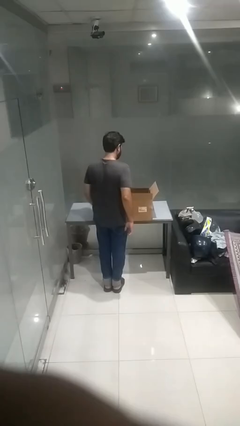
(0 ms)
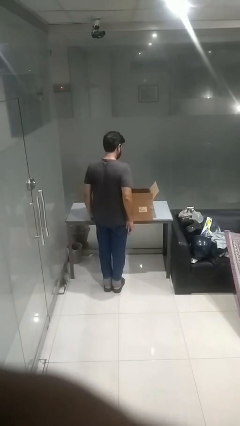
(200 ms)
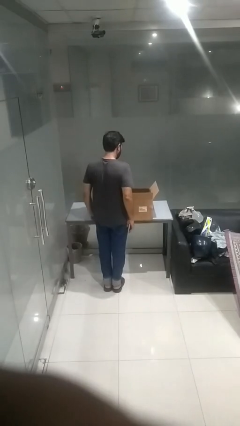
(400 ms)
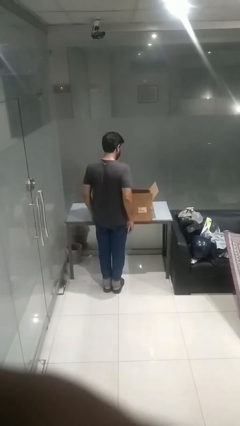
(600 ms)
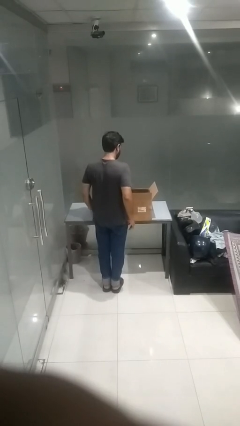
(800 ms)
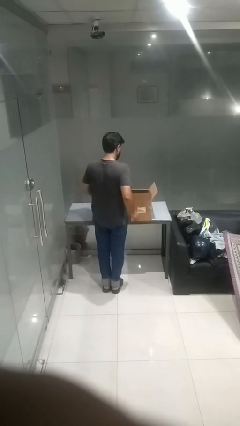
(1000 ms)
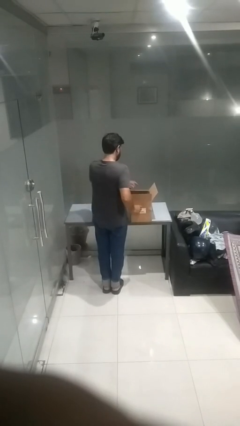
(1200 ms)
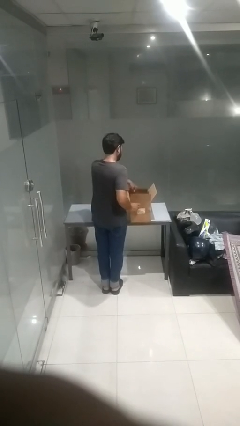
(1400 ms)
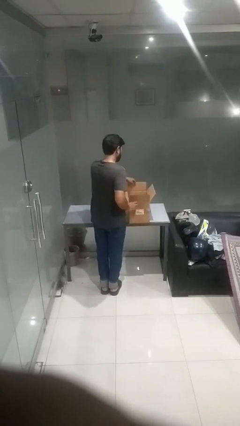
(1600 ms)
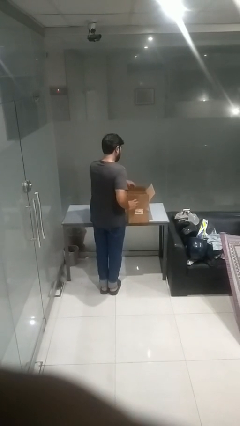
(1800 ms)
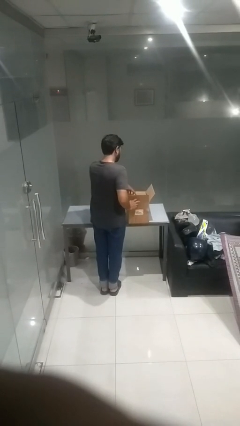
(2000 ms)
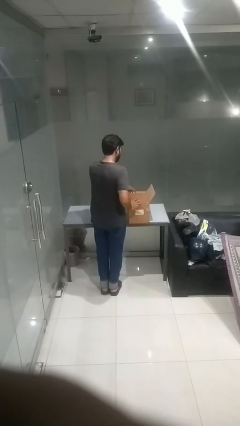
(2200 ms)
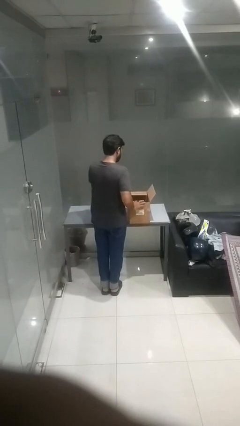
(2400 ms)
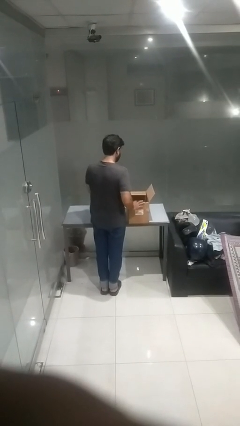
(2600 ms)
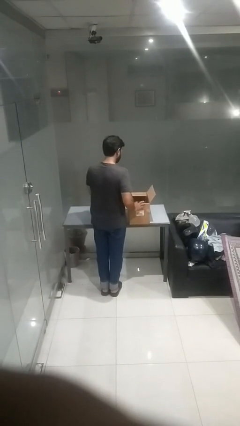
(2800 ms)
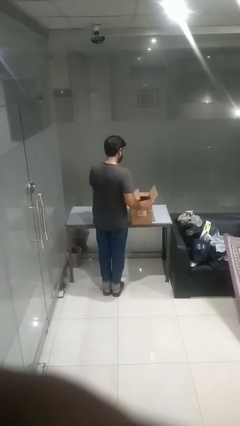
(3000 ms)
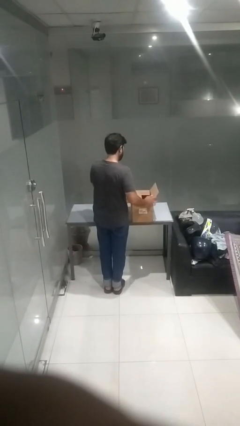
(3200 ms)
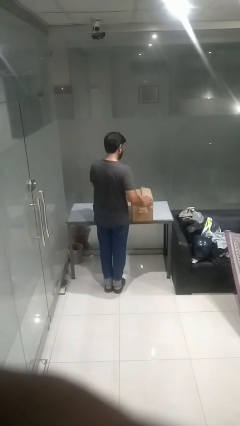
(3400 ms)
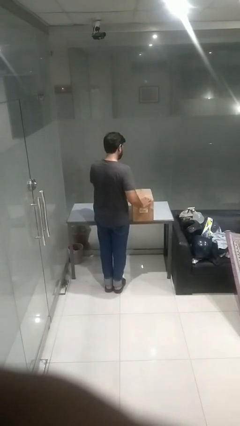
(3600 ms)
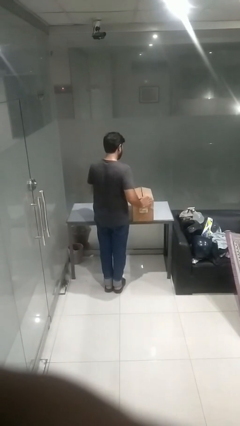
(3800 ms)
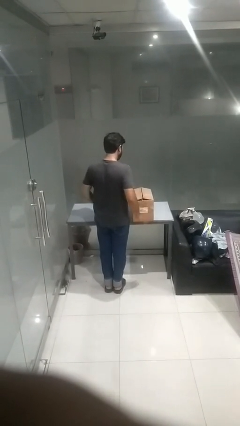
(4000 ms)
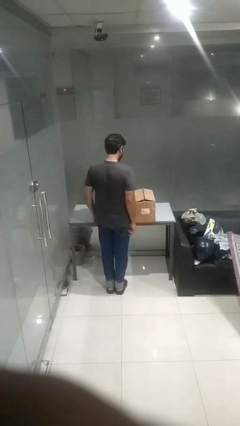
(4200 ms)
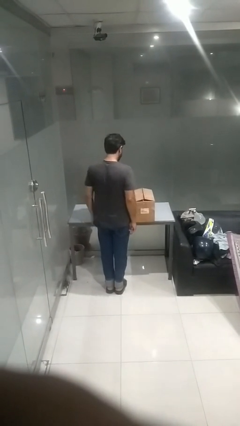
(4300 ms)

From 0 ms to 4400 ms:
person closes box

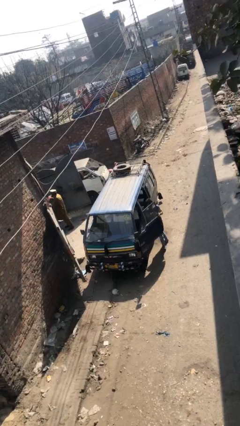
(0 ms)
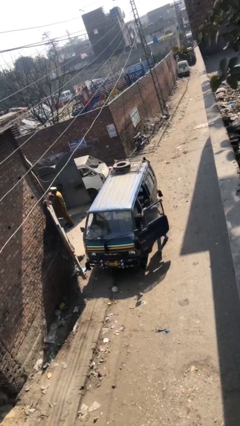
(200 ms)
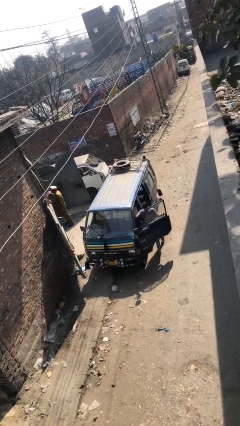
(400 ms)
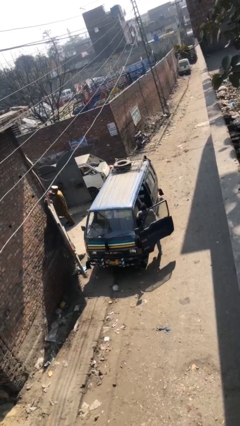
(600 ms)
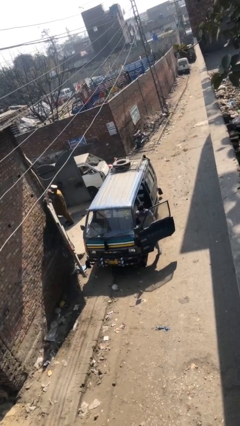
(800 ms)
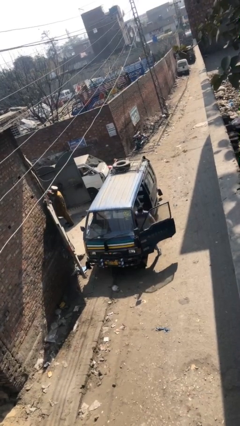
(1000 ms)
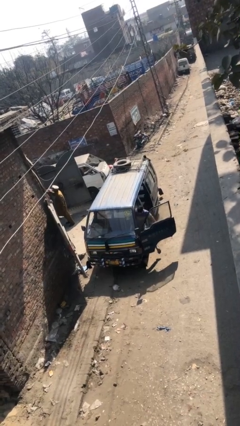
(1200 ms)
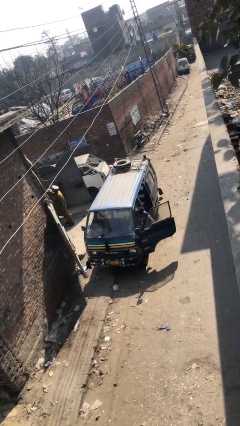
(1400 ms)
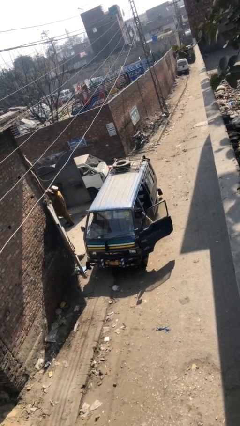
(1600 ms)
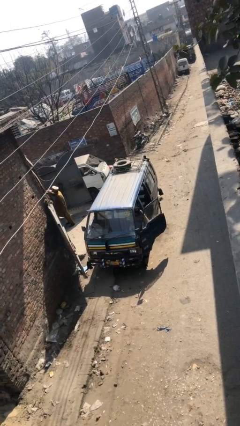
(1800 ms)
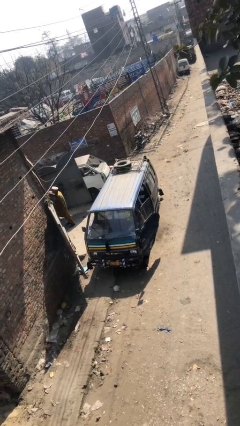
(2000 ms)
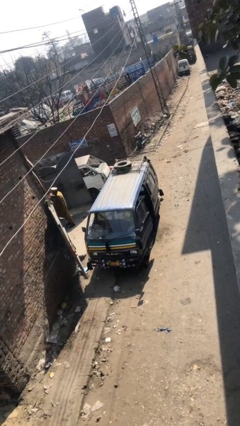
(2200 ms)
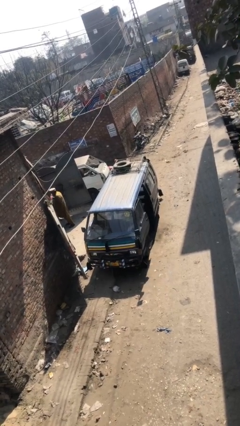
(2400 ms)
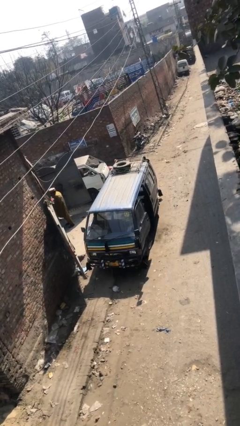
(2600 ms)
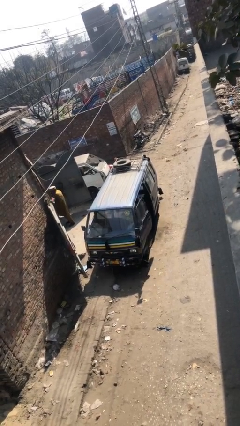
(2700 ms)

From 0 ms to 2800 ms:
car picks up person

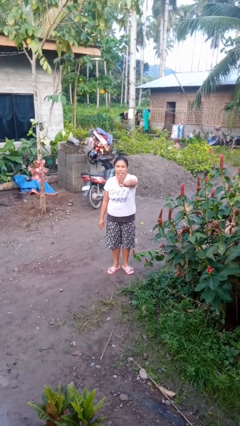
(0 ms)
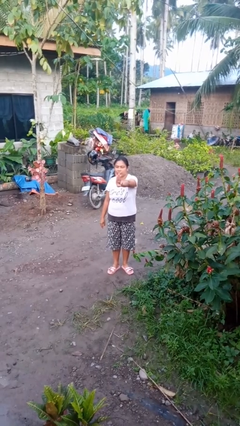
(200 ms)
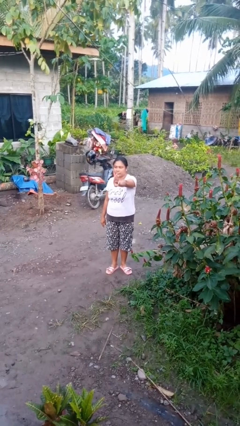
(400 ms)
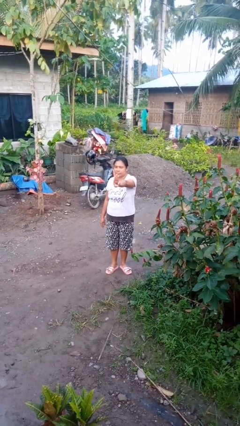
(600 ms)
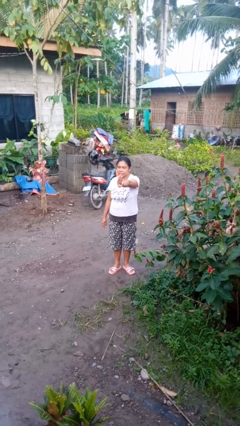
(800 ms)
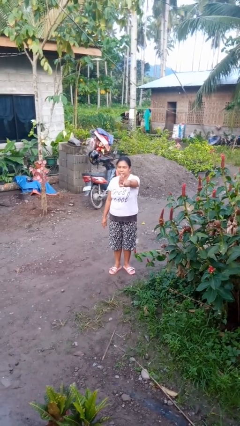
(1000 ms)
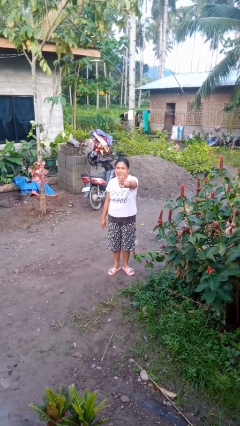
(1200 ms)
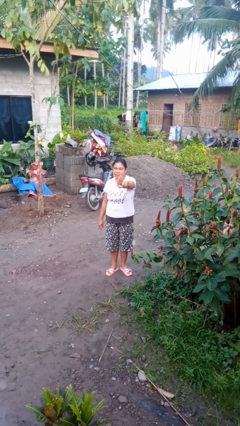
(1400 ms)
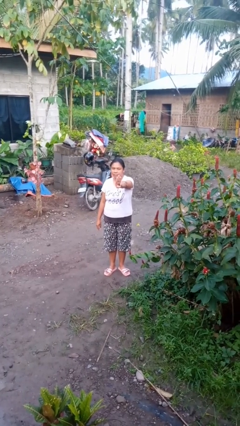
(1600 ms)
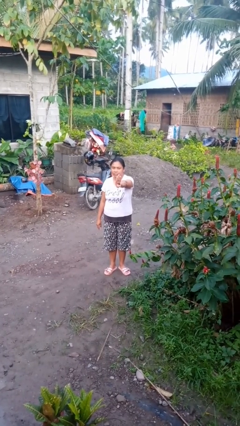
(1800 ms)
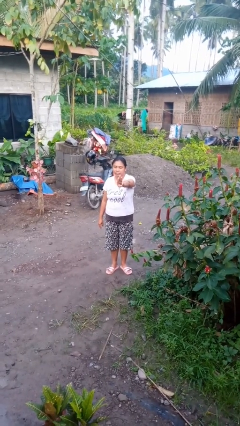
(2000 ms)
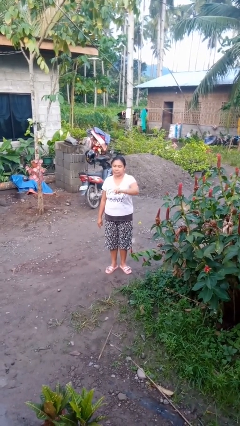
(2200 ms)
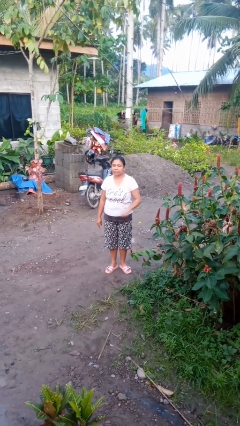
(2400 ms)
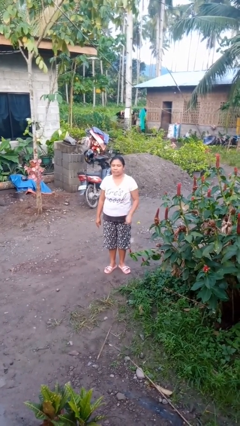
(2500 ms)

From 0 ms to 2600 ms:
person gestures number three

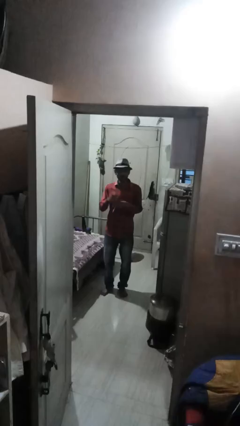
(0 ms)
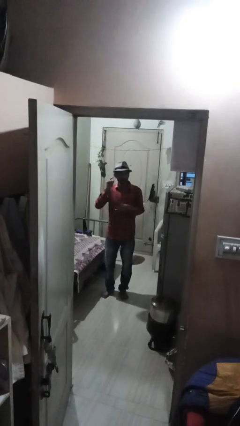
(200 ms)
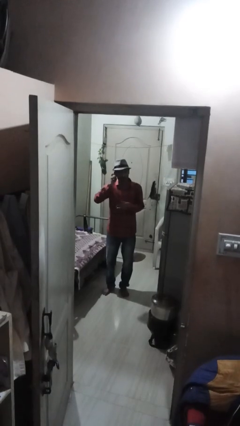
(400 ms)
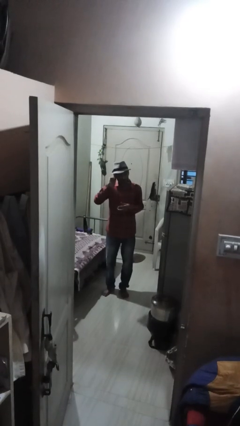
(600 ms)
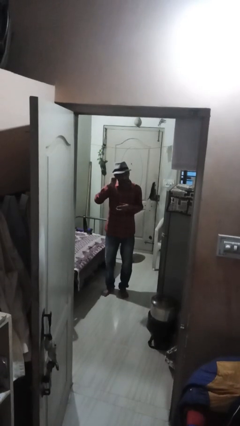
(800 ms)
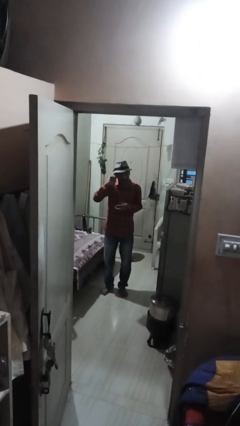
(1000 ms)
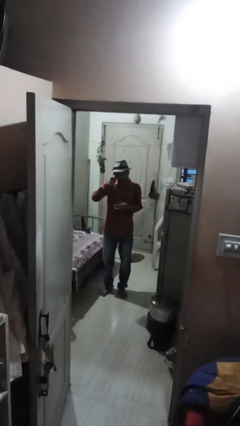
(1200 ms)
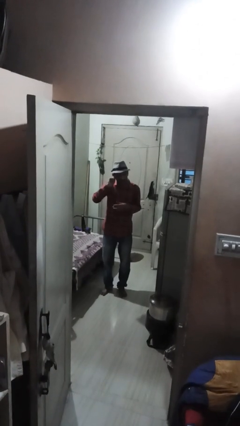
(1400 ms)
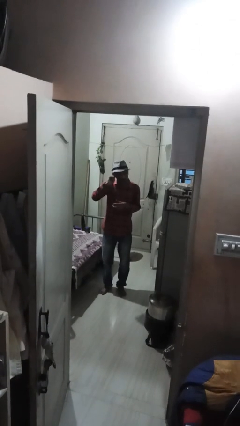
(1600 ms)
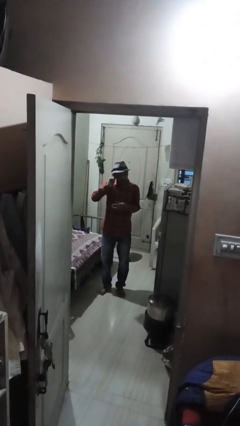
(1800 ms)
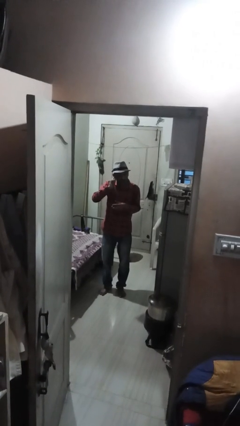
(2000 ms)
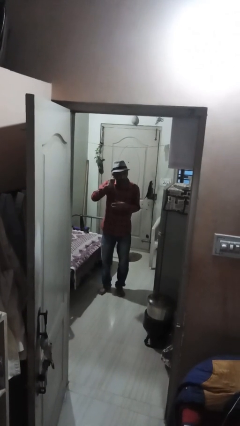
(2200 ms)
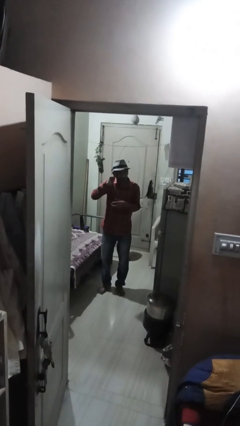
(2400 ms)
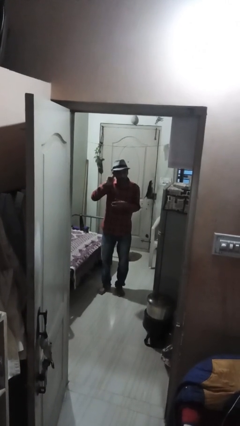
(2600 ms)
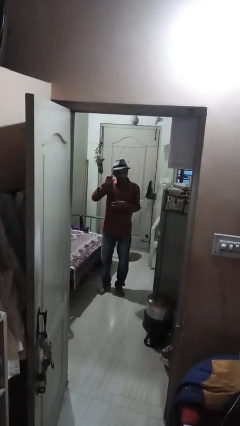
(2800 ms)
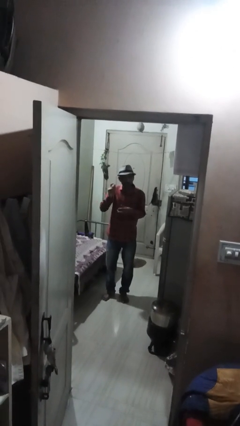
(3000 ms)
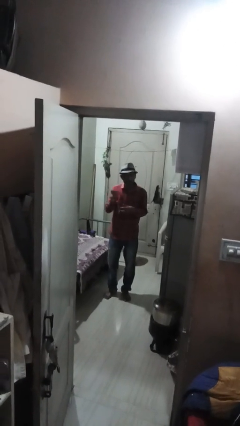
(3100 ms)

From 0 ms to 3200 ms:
person touches earlobe

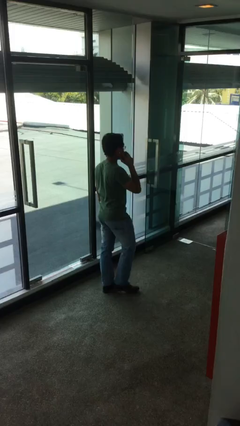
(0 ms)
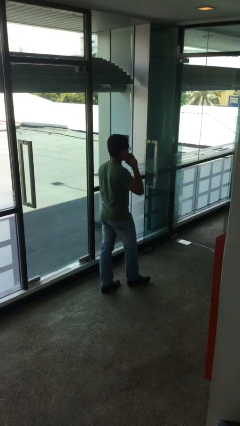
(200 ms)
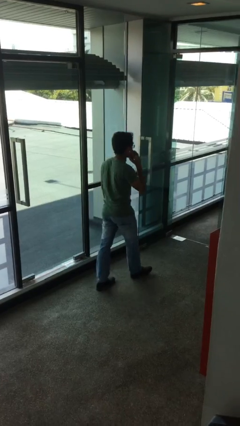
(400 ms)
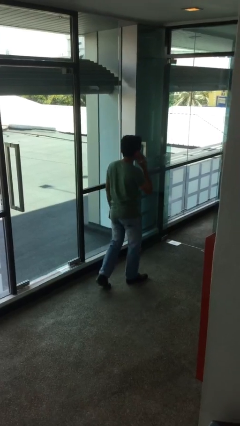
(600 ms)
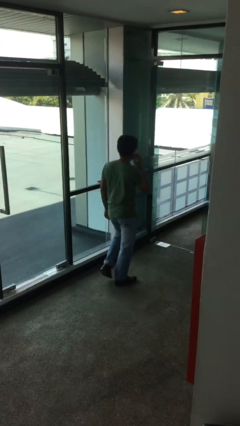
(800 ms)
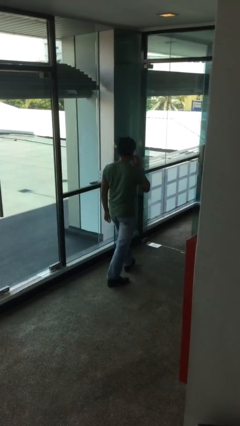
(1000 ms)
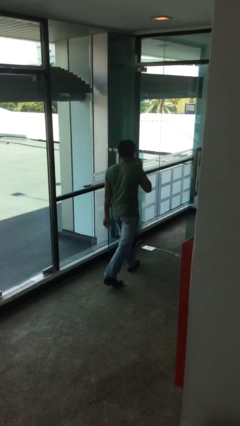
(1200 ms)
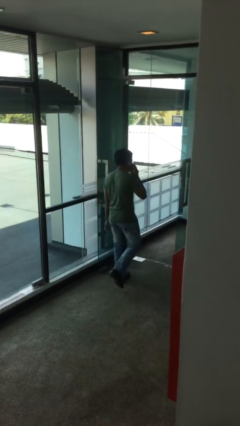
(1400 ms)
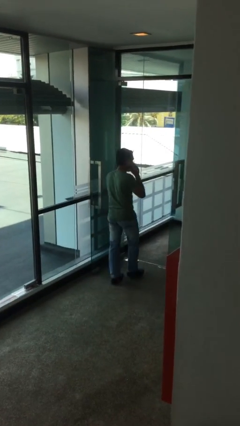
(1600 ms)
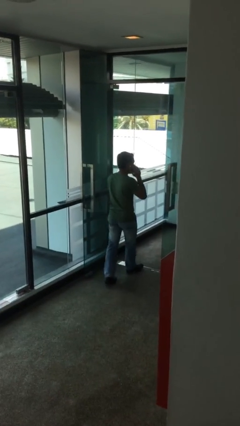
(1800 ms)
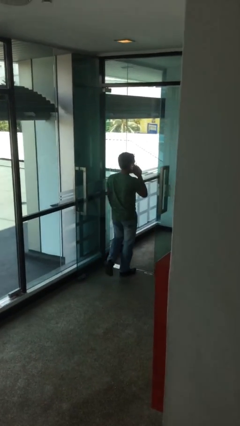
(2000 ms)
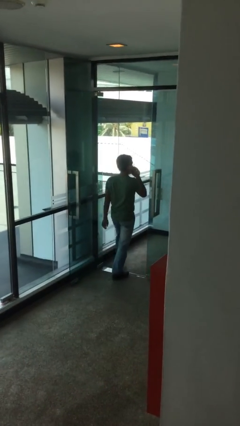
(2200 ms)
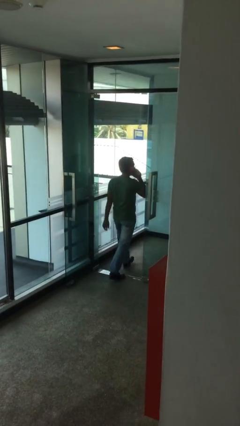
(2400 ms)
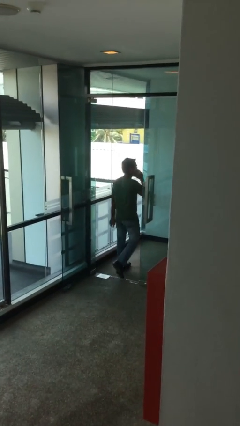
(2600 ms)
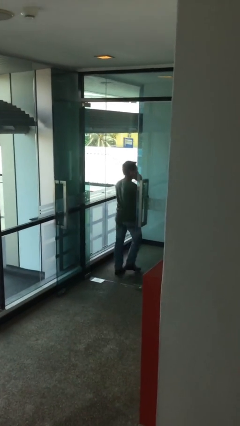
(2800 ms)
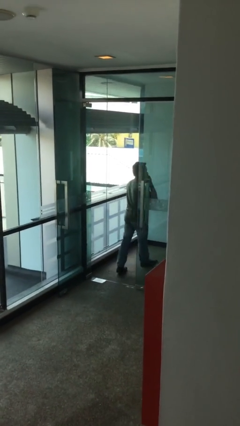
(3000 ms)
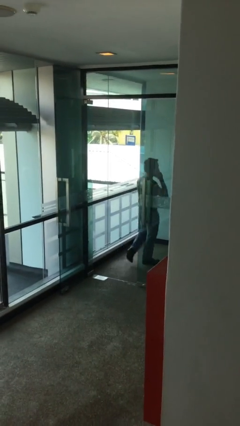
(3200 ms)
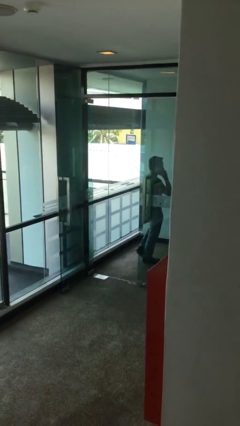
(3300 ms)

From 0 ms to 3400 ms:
person exits scene through structure

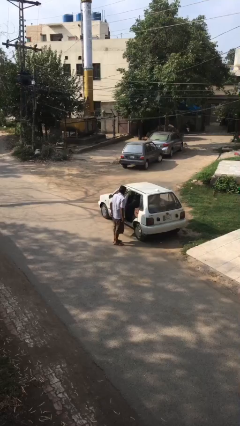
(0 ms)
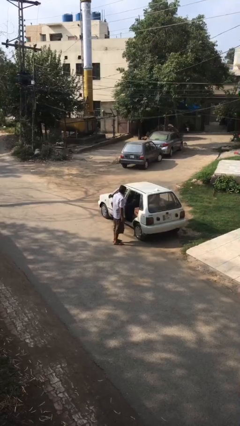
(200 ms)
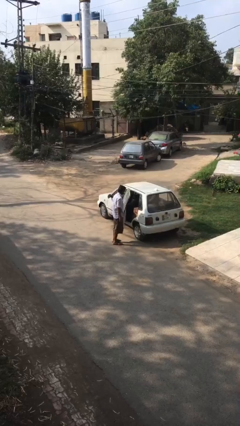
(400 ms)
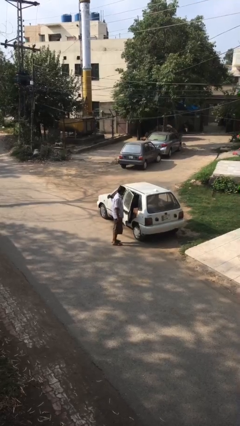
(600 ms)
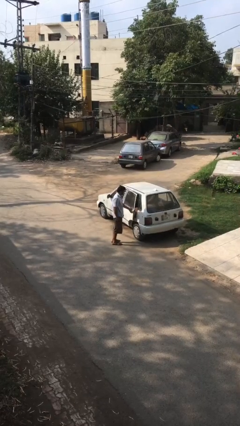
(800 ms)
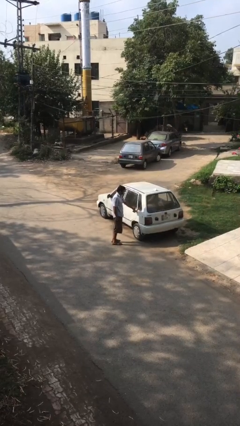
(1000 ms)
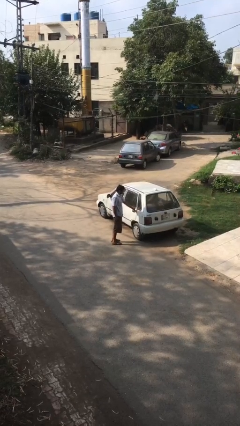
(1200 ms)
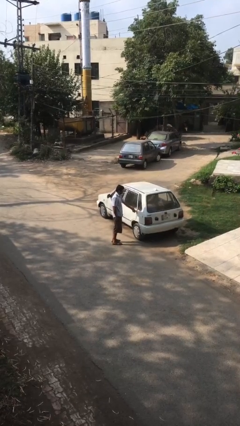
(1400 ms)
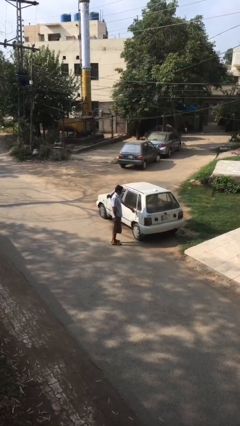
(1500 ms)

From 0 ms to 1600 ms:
person closes car door
